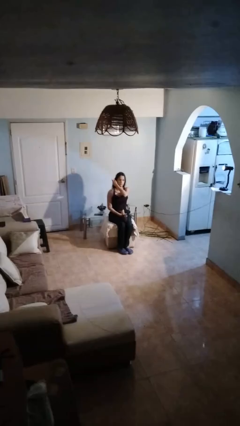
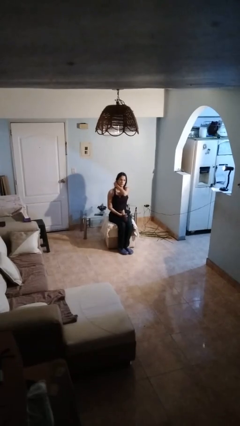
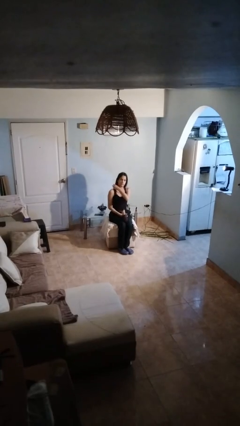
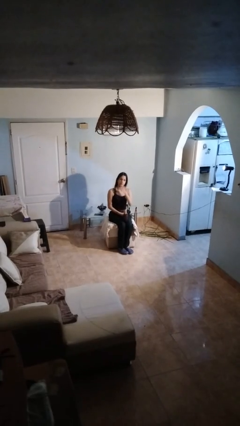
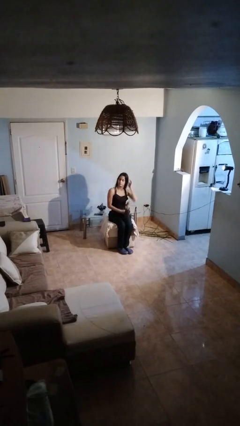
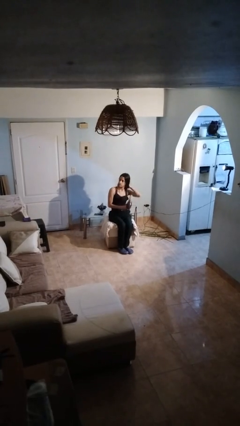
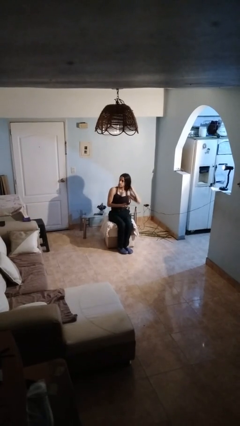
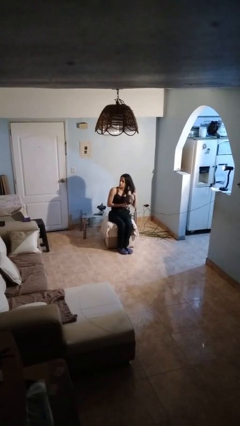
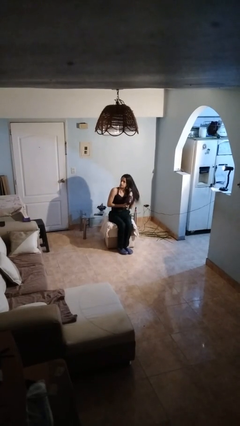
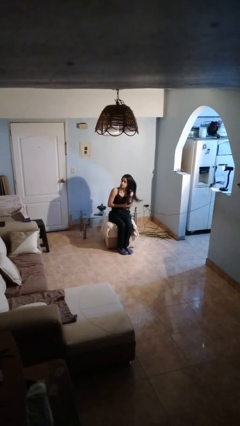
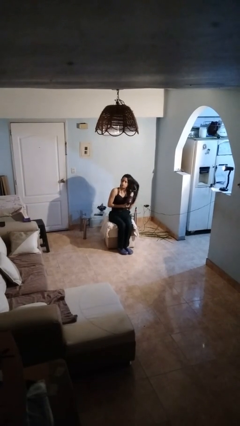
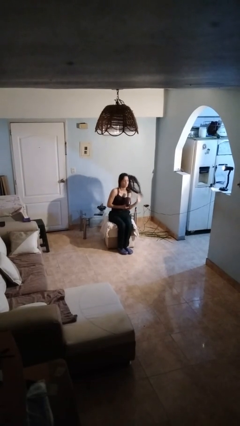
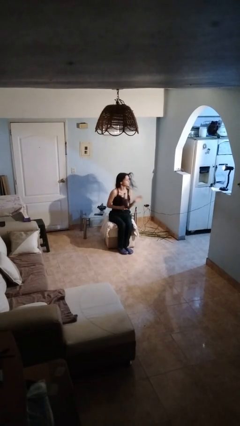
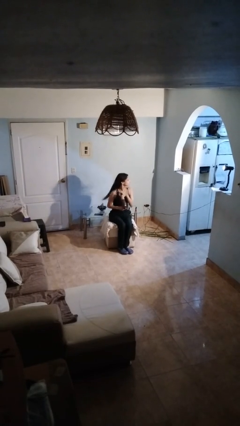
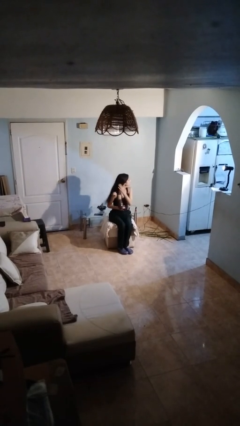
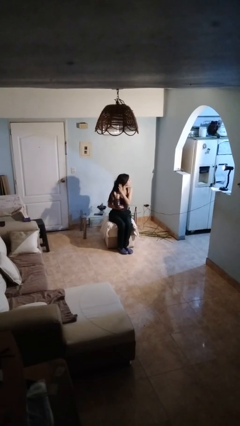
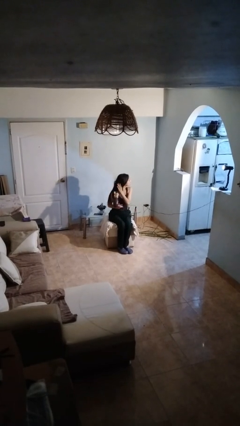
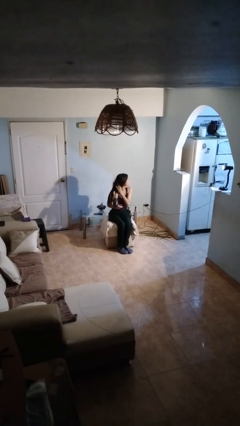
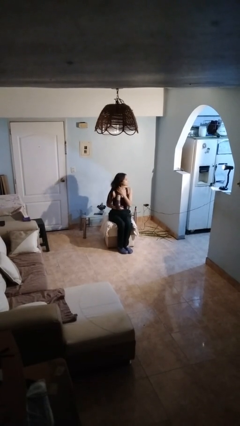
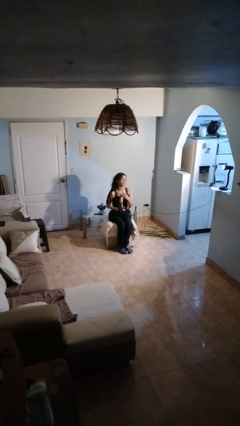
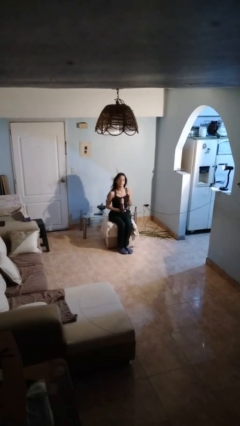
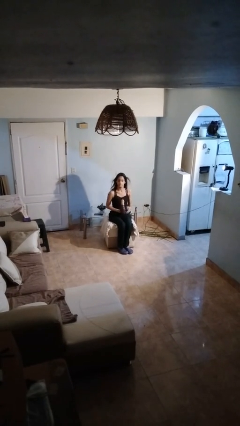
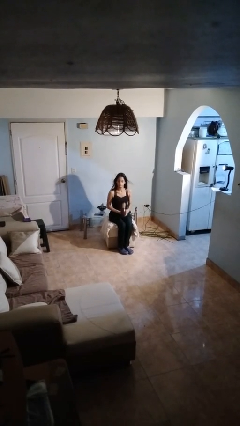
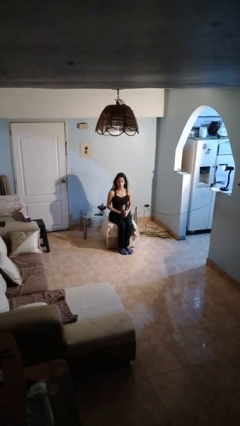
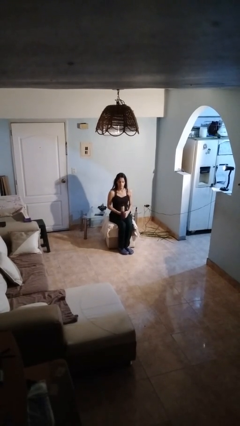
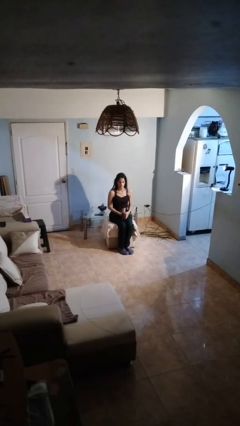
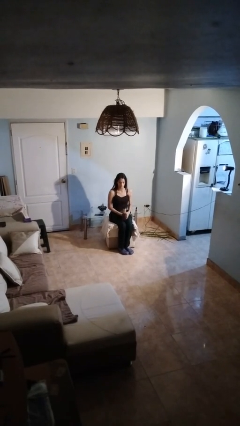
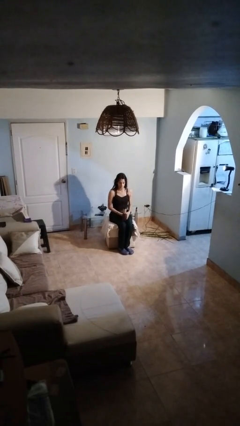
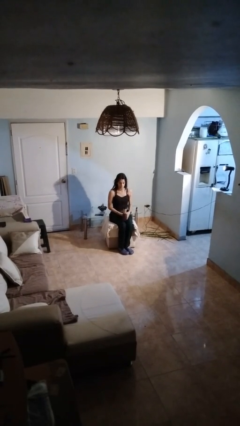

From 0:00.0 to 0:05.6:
person dries hair with hairdryer

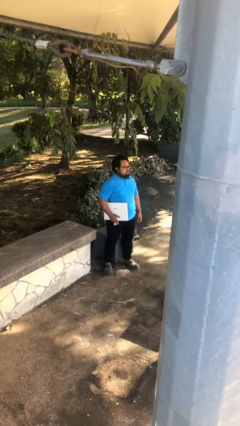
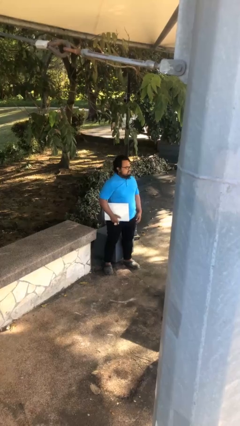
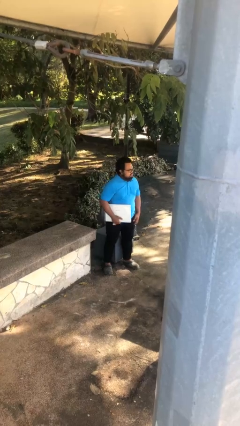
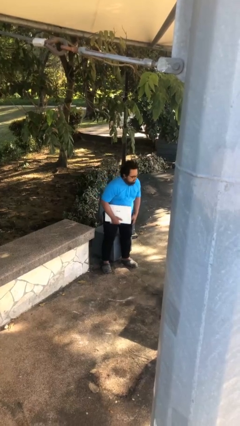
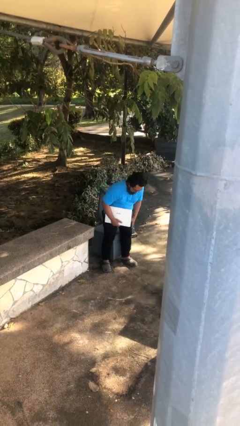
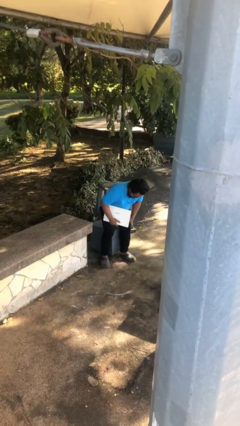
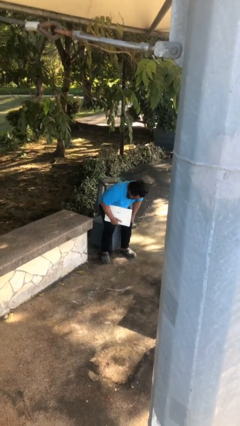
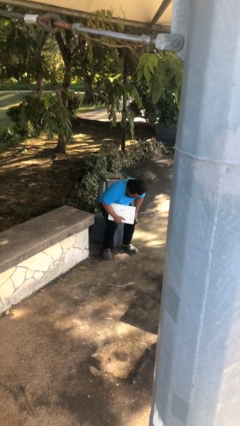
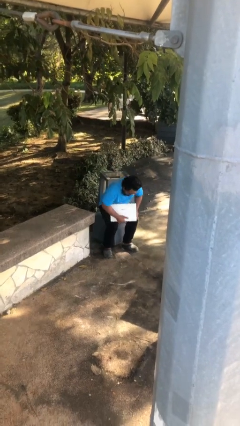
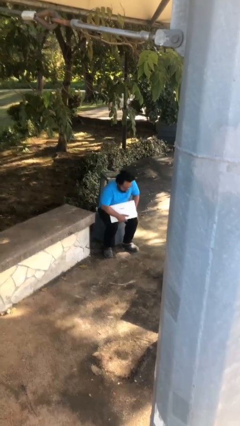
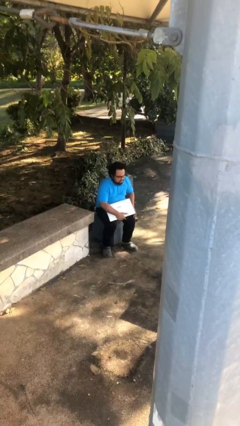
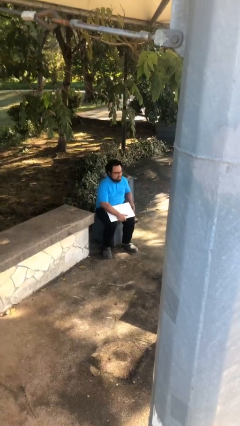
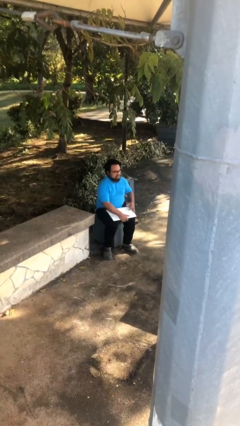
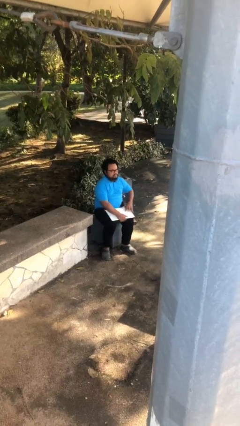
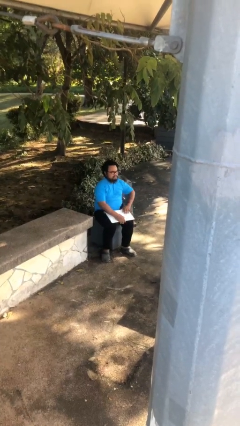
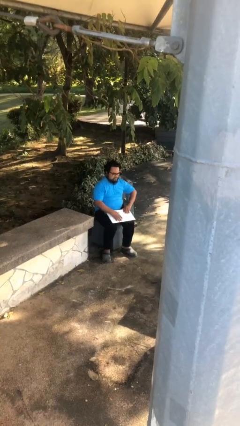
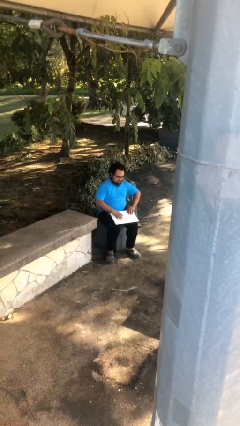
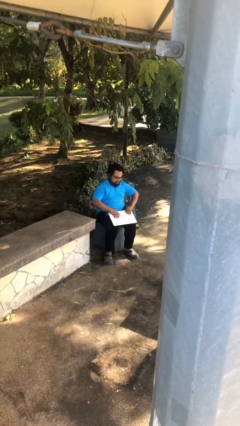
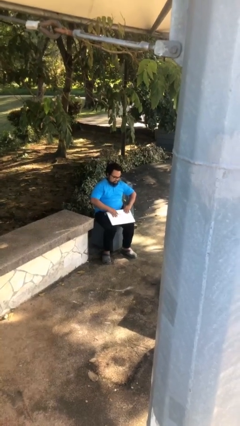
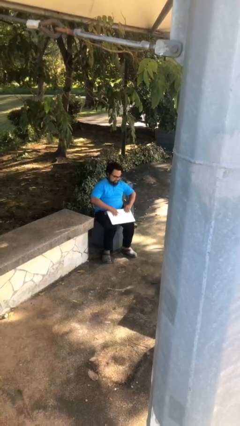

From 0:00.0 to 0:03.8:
person sits down

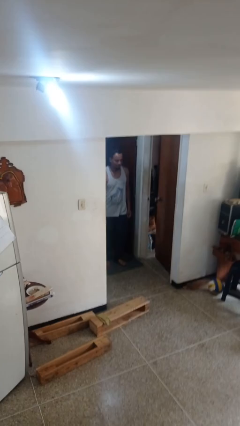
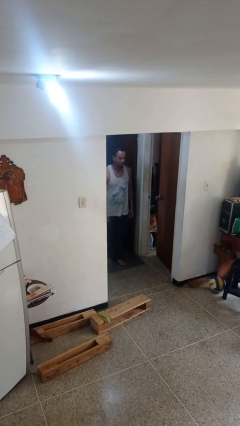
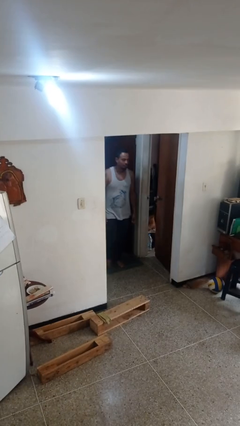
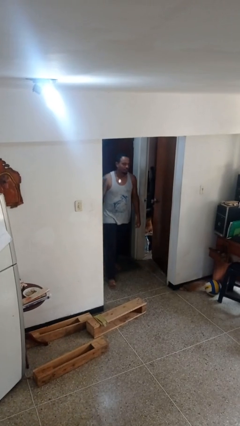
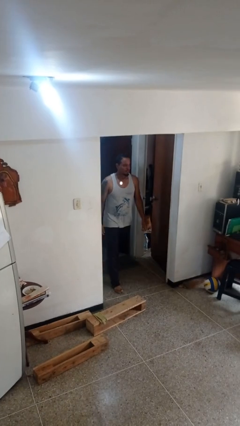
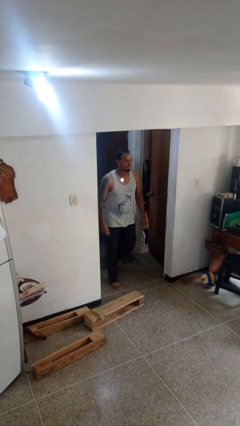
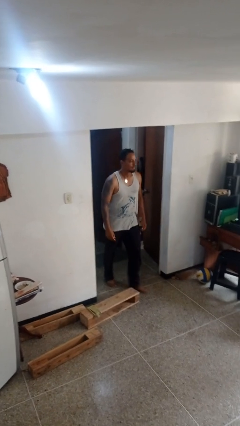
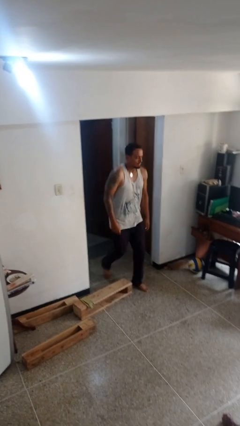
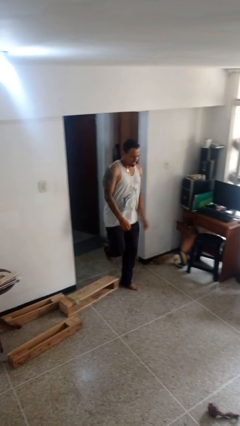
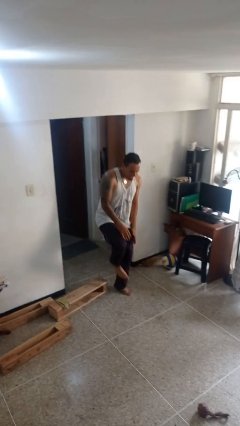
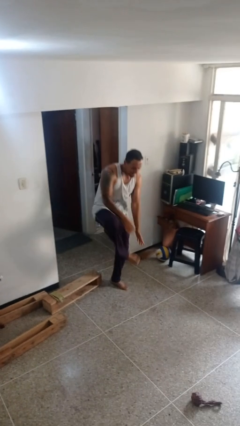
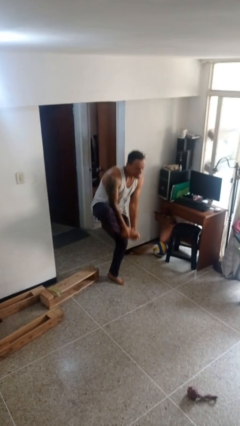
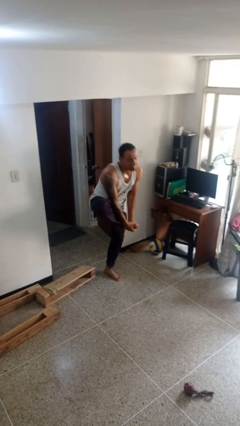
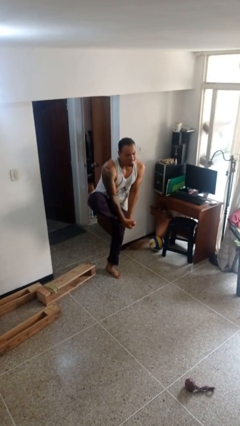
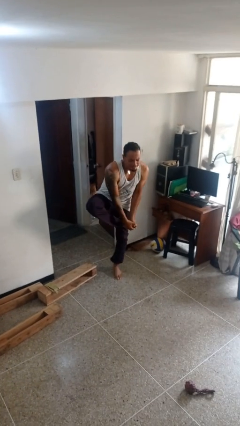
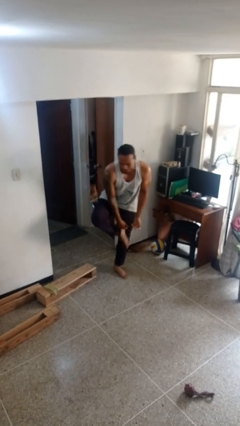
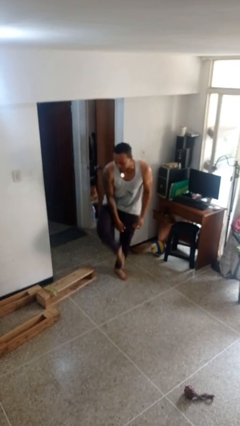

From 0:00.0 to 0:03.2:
person stubs toe

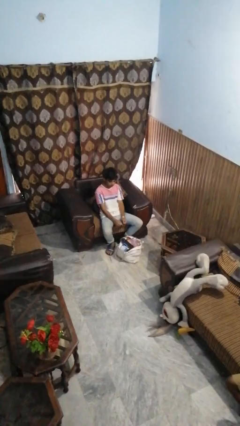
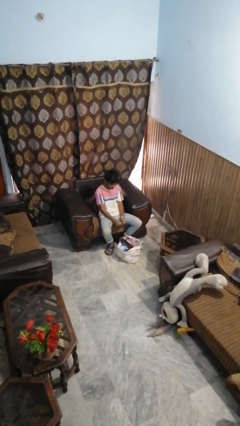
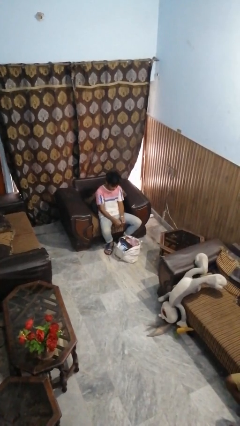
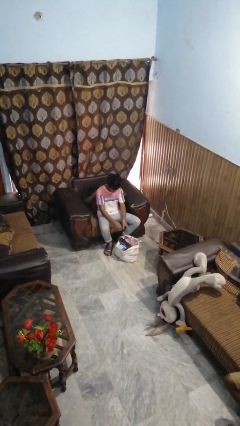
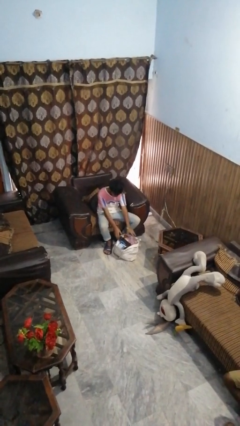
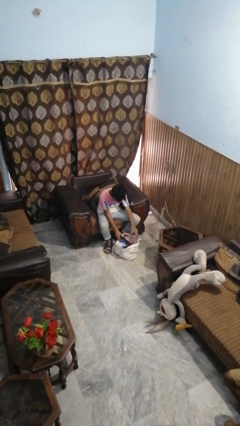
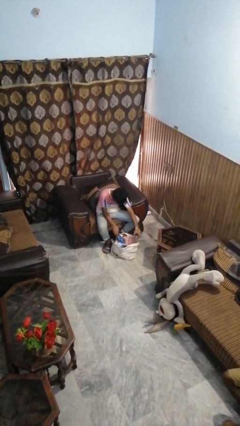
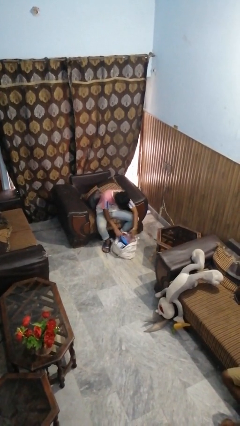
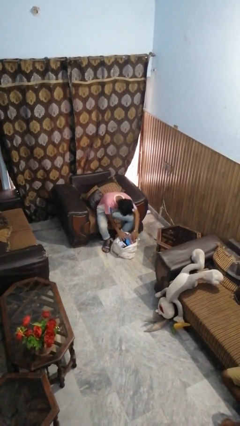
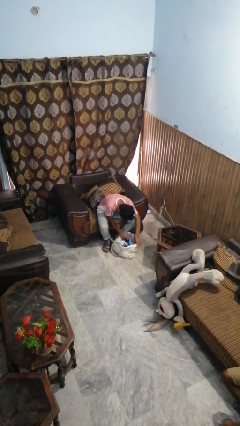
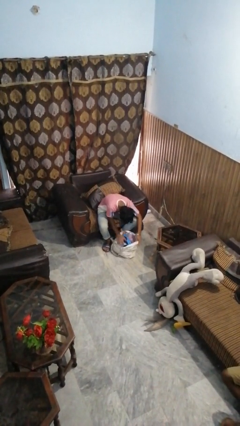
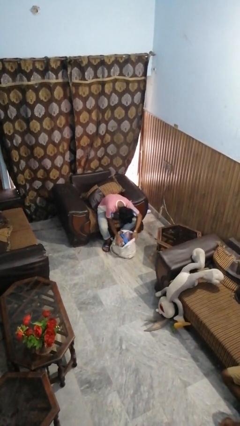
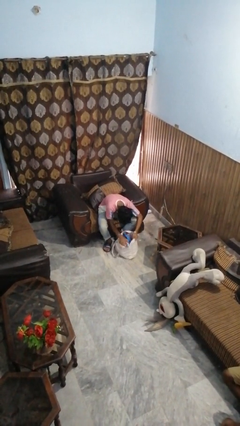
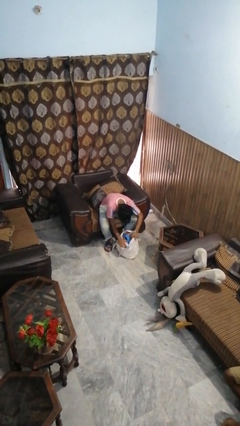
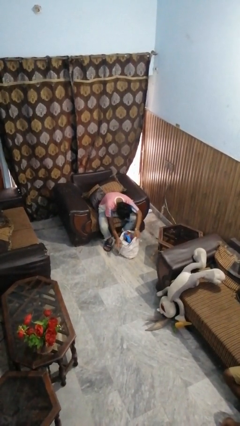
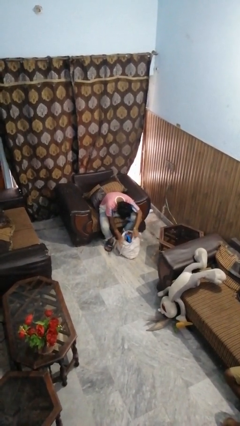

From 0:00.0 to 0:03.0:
person searches in bag

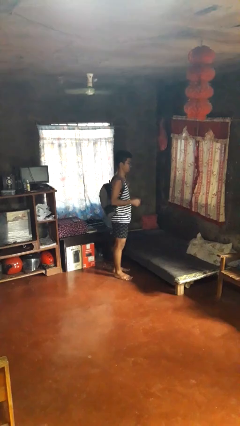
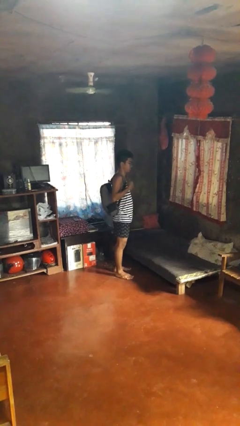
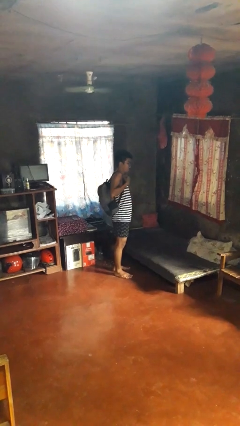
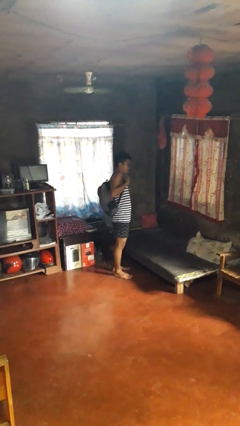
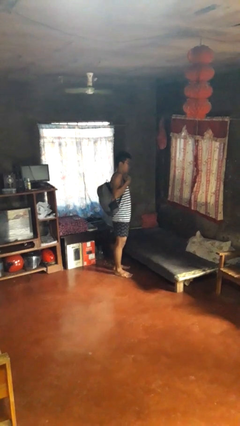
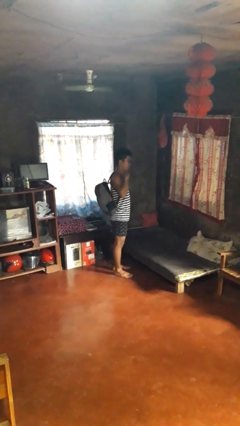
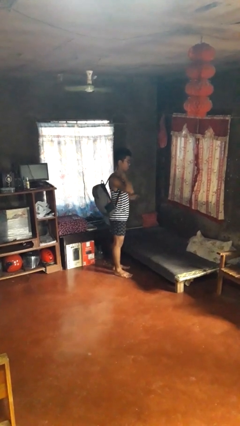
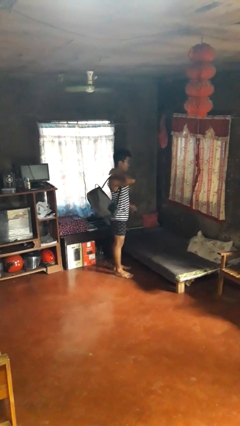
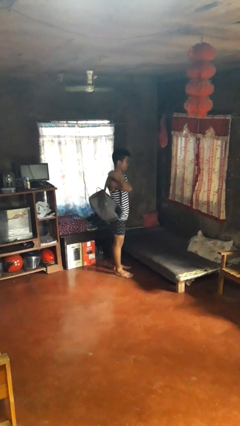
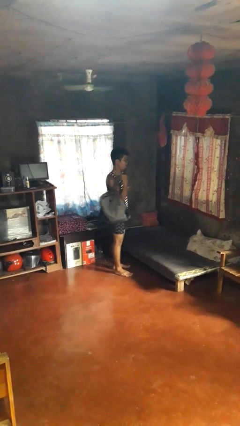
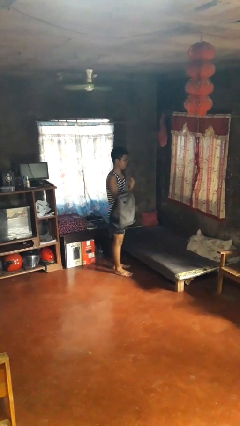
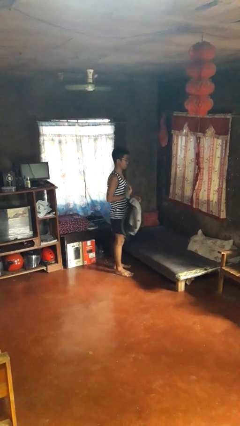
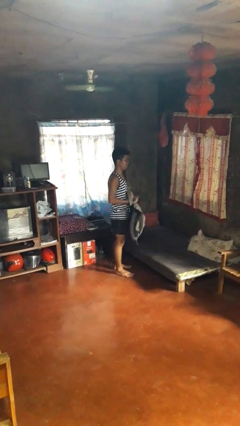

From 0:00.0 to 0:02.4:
person takes off backpack
